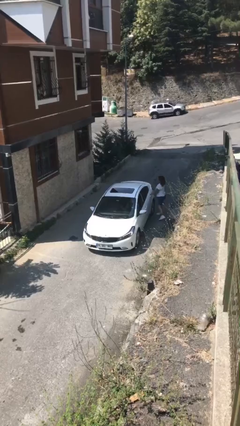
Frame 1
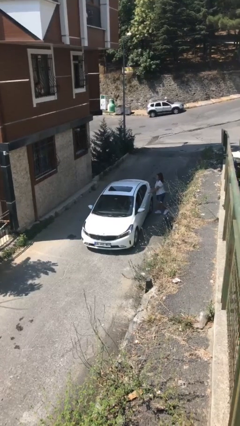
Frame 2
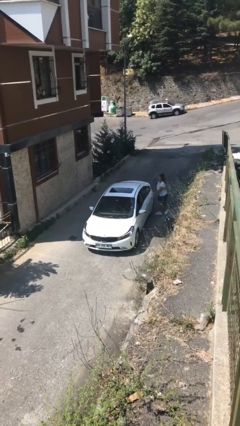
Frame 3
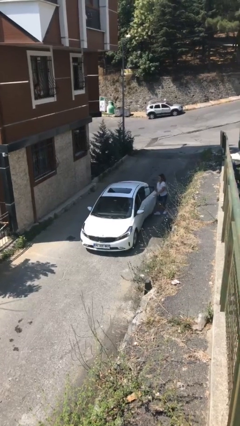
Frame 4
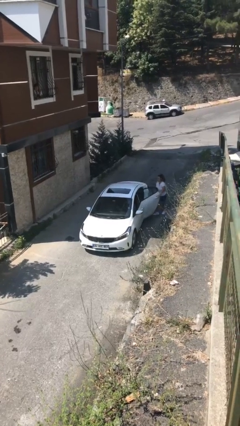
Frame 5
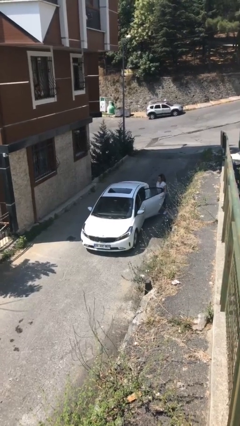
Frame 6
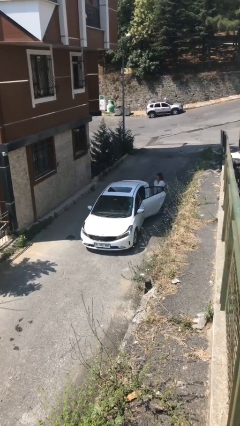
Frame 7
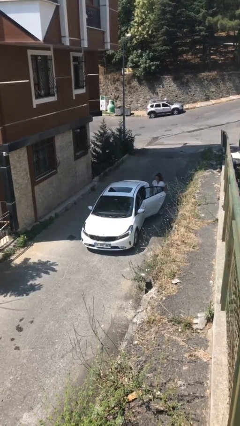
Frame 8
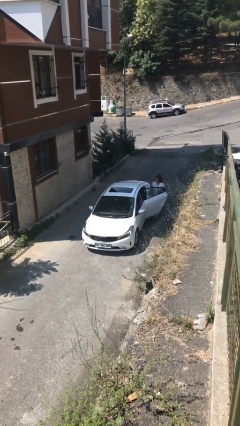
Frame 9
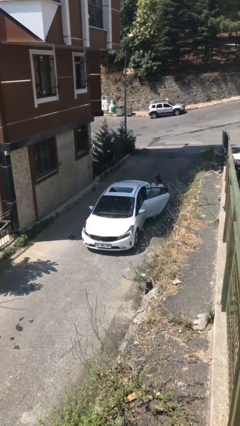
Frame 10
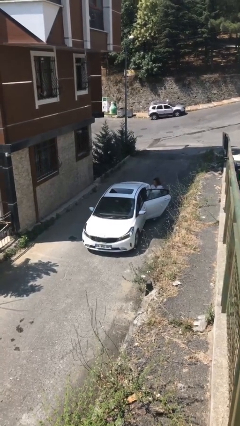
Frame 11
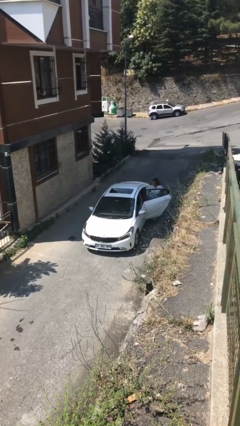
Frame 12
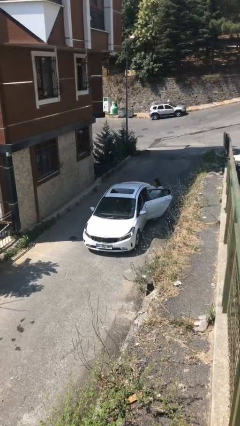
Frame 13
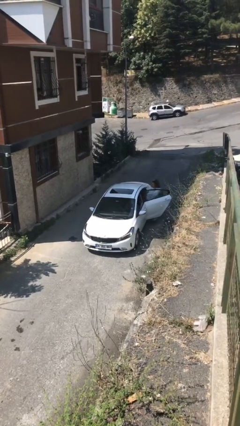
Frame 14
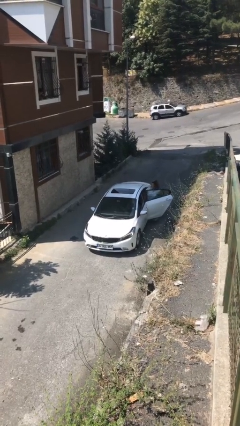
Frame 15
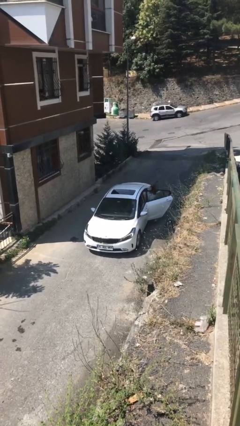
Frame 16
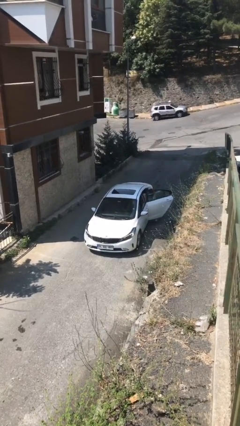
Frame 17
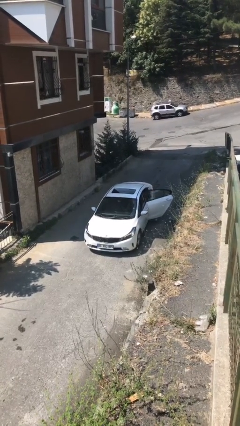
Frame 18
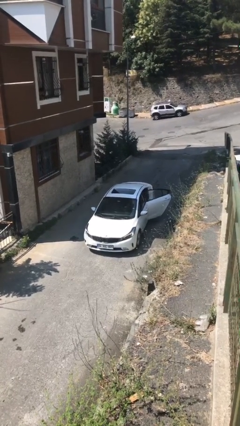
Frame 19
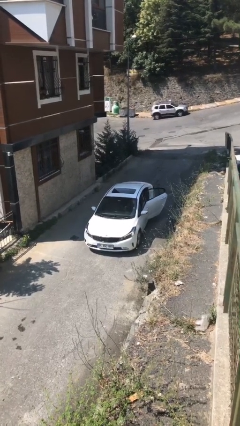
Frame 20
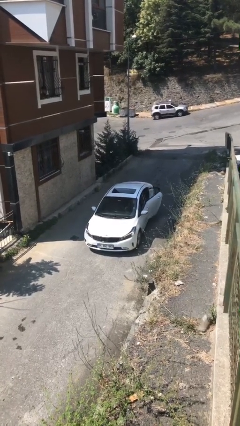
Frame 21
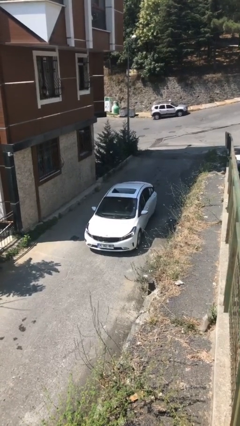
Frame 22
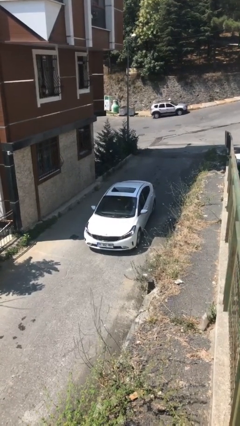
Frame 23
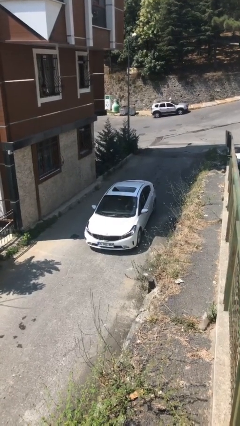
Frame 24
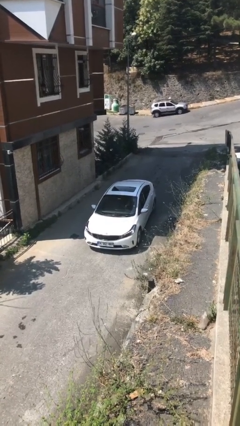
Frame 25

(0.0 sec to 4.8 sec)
car picks up person

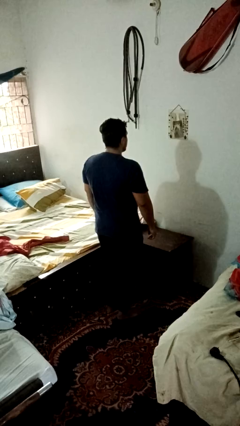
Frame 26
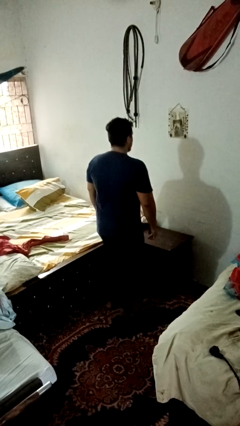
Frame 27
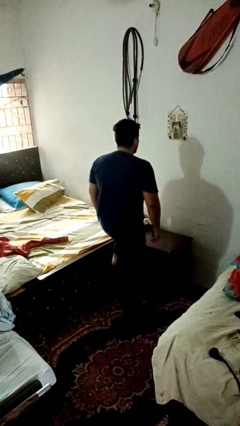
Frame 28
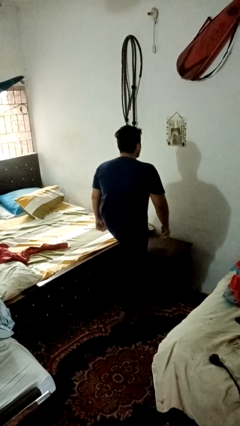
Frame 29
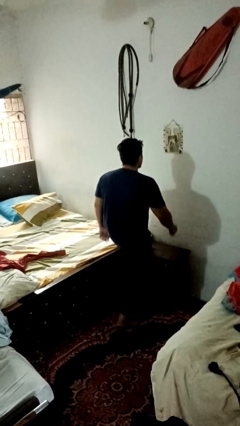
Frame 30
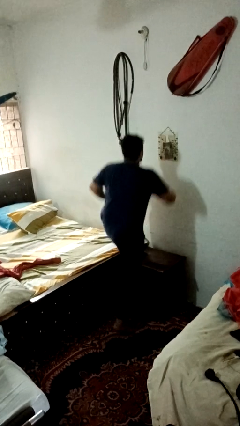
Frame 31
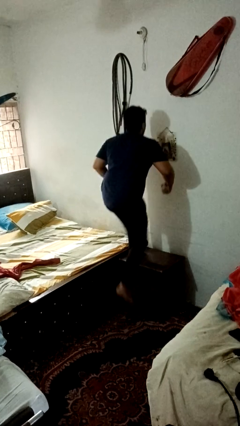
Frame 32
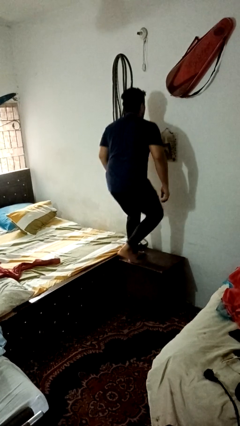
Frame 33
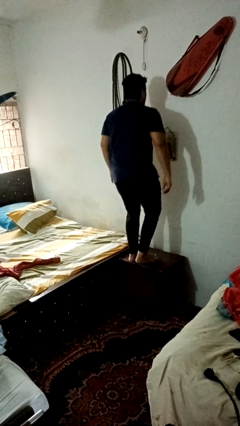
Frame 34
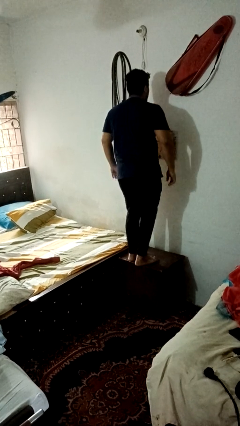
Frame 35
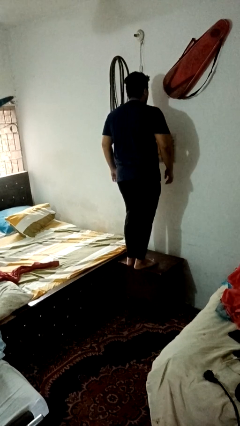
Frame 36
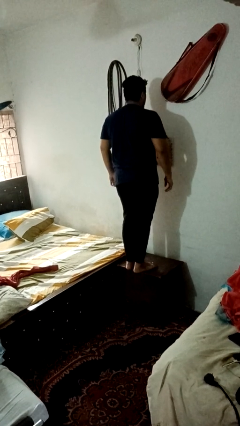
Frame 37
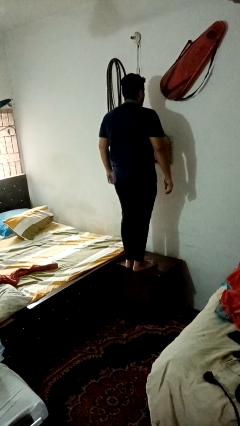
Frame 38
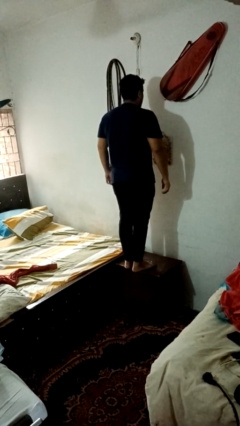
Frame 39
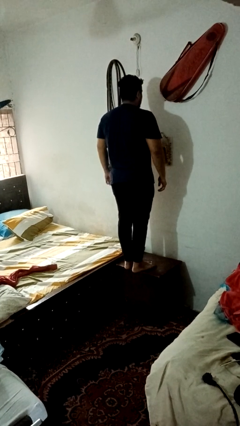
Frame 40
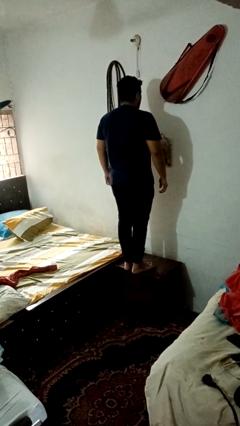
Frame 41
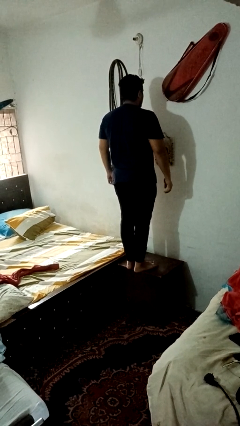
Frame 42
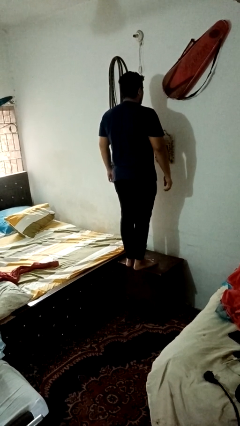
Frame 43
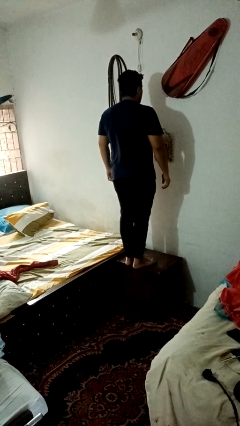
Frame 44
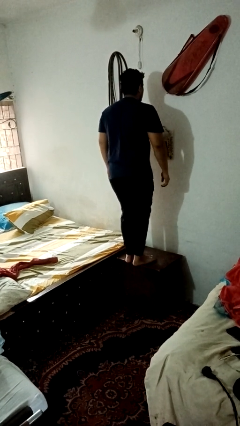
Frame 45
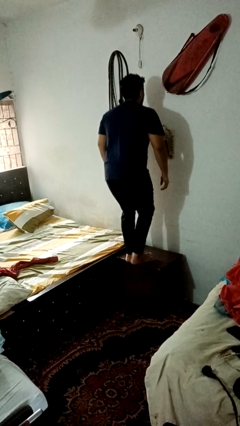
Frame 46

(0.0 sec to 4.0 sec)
person climbs on table

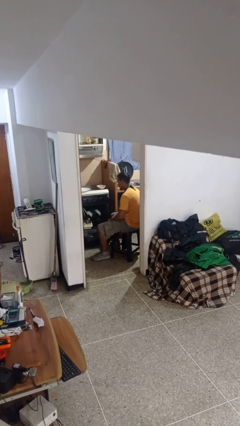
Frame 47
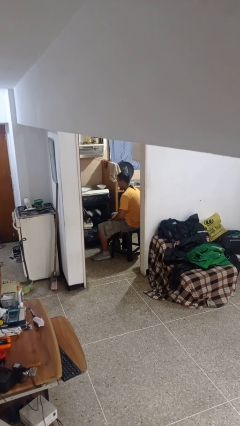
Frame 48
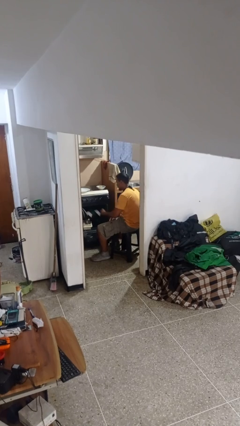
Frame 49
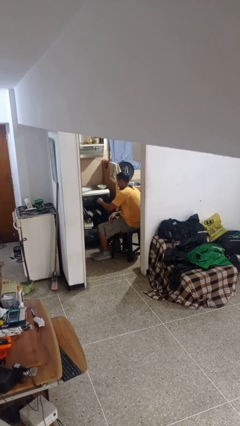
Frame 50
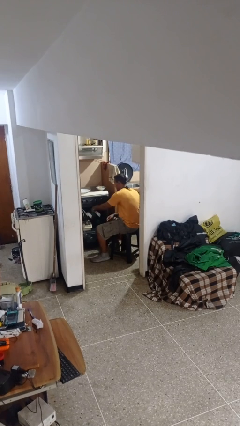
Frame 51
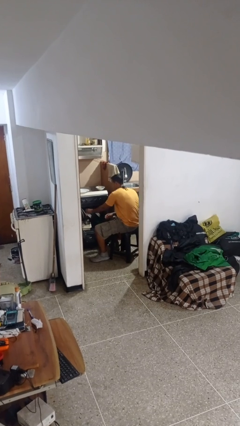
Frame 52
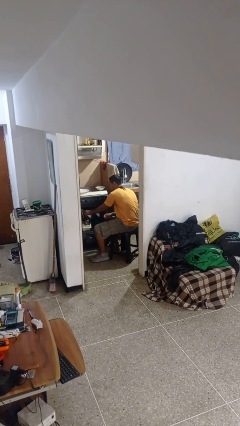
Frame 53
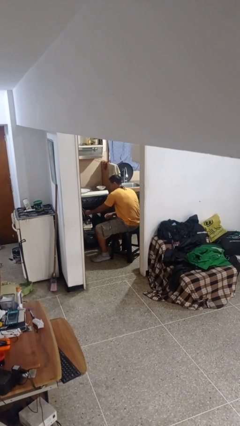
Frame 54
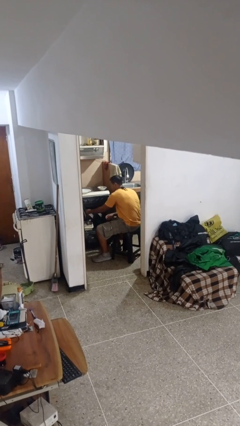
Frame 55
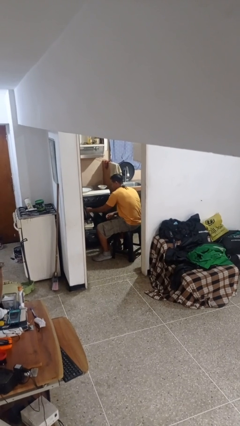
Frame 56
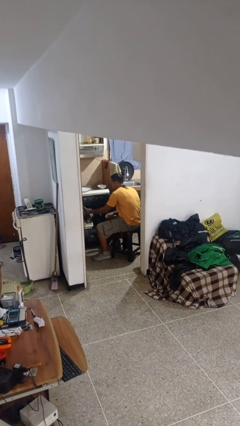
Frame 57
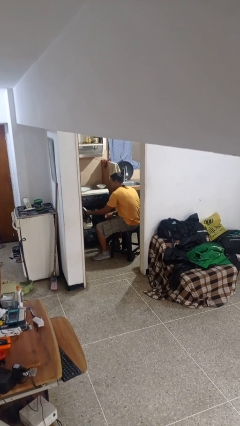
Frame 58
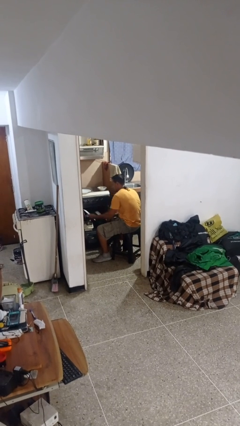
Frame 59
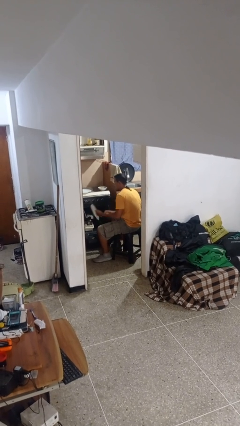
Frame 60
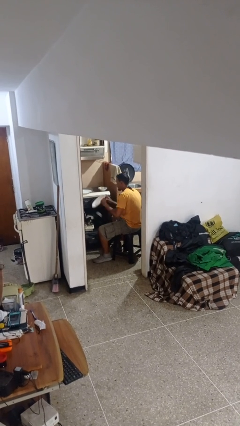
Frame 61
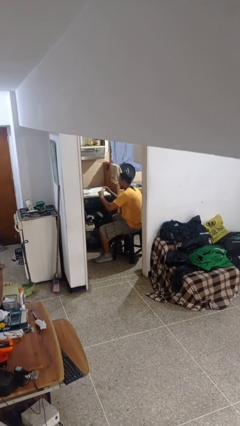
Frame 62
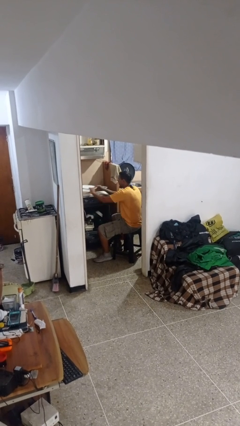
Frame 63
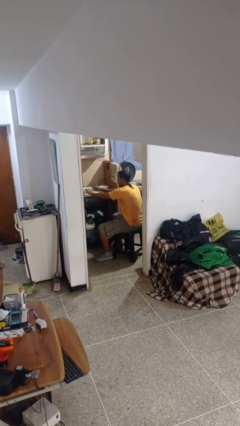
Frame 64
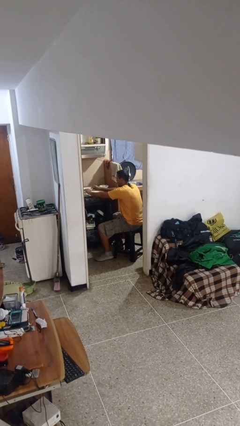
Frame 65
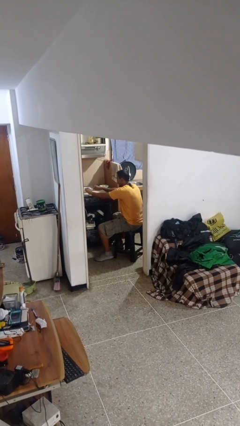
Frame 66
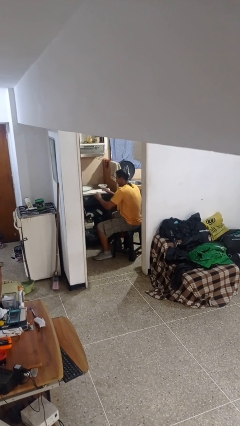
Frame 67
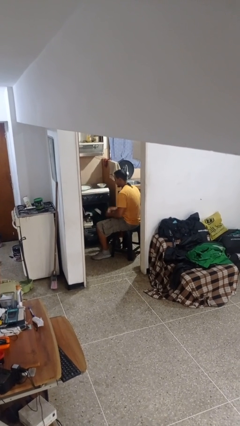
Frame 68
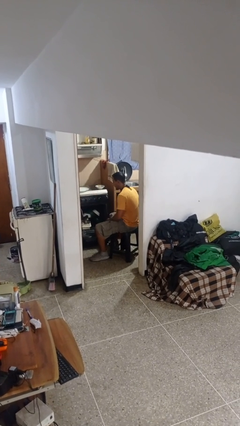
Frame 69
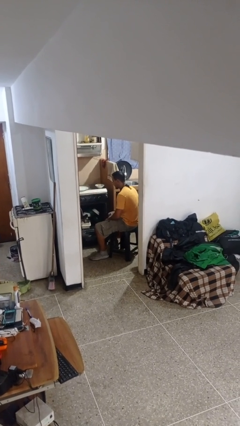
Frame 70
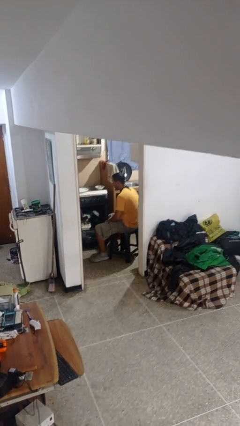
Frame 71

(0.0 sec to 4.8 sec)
person unloads dishwasher

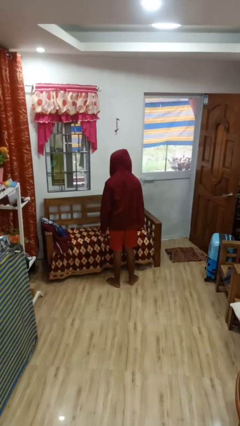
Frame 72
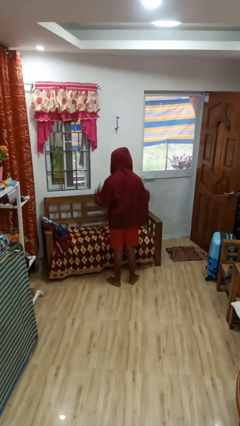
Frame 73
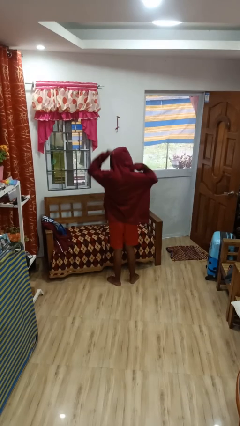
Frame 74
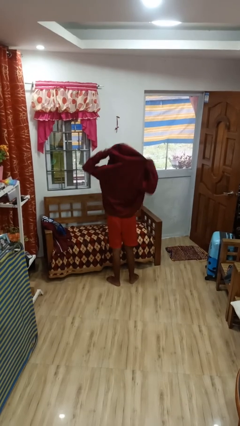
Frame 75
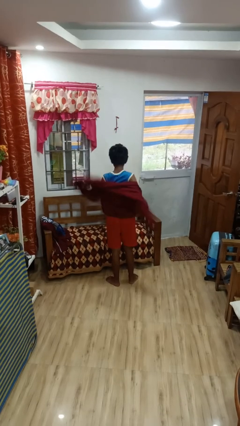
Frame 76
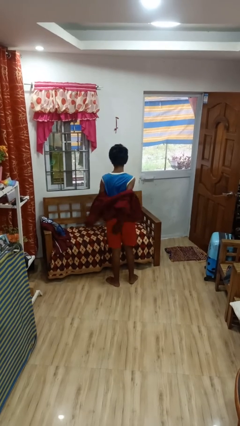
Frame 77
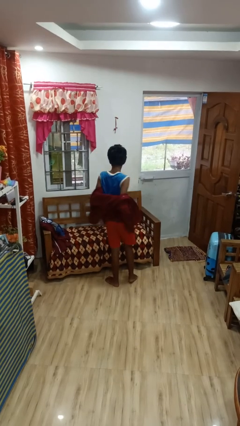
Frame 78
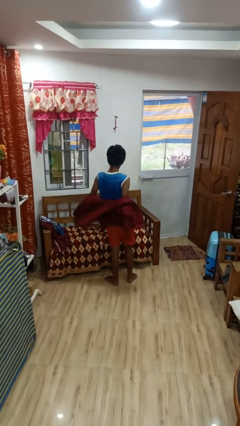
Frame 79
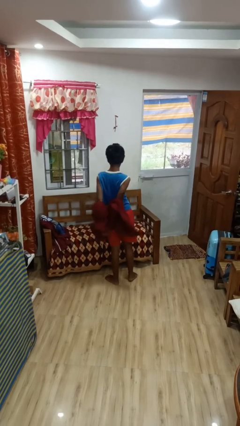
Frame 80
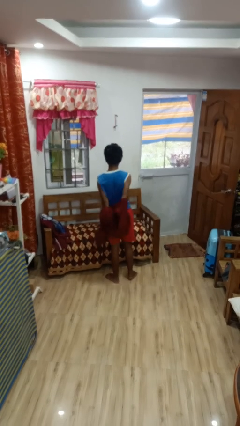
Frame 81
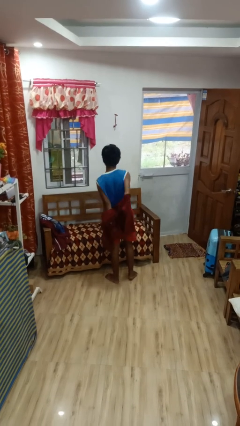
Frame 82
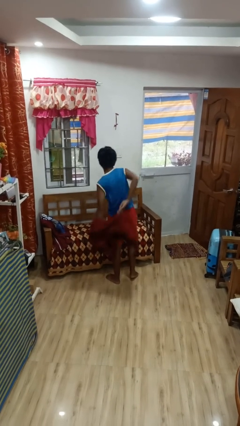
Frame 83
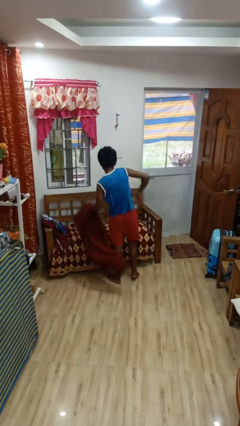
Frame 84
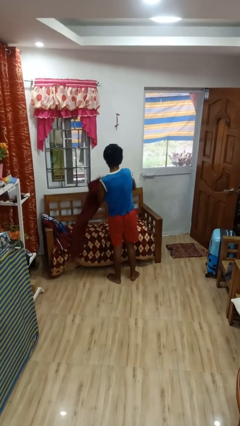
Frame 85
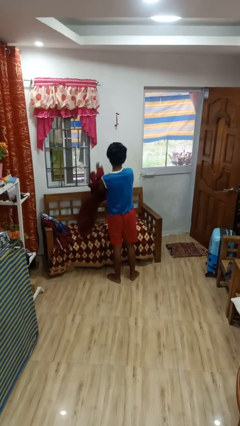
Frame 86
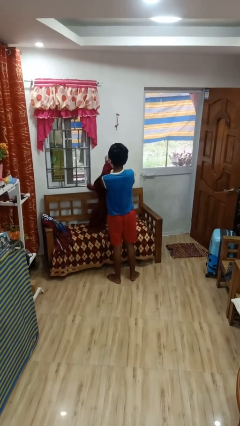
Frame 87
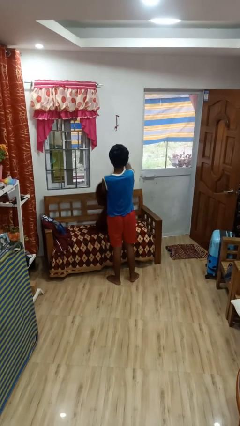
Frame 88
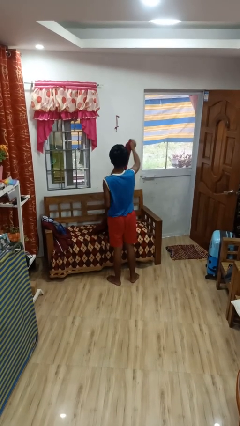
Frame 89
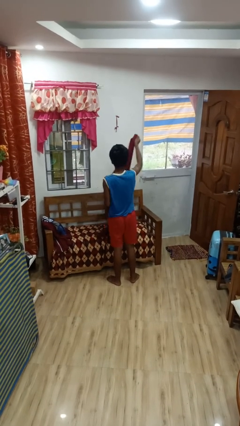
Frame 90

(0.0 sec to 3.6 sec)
person takes off hoodie
